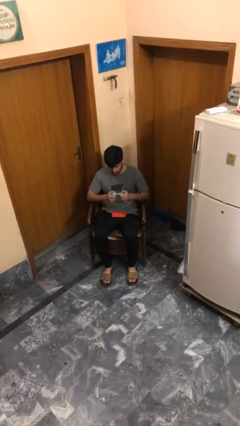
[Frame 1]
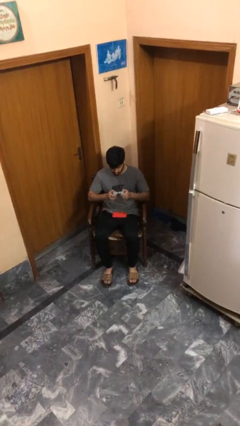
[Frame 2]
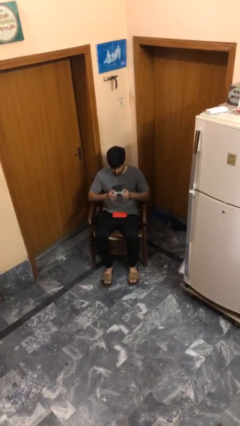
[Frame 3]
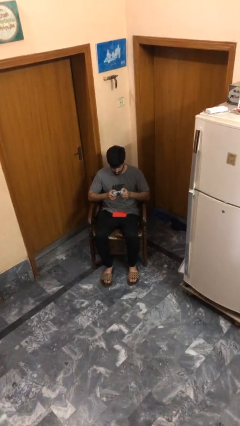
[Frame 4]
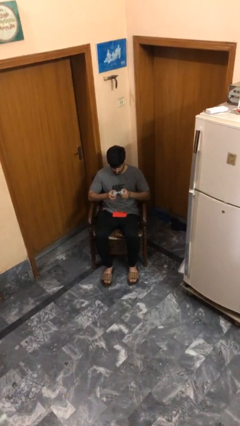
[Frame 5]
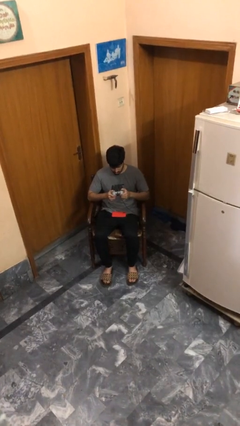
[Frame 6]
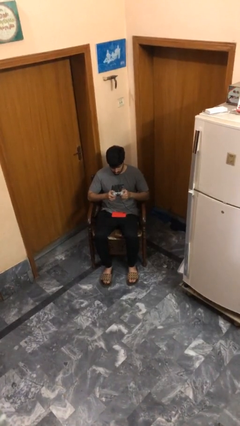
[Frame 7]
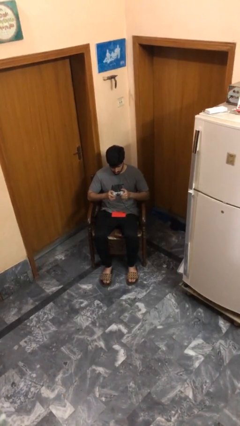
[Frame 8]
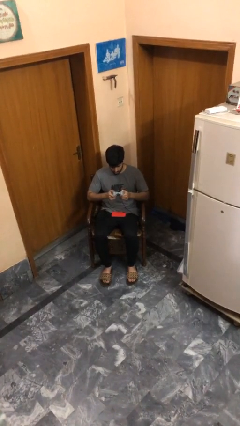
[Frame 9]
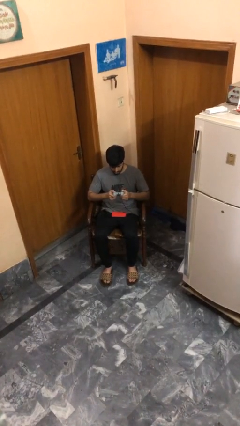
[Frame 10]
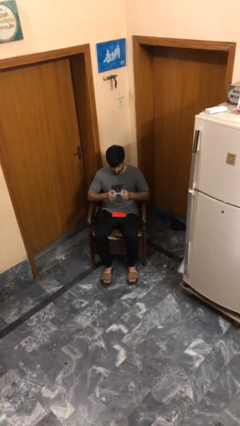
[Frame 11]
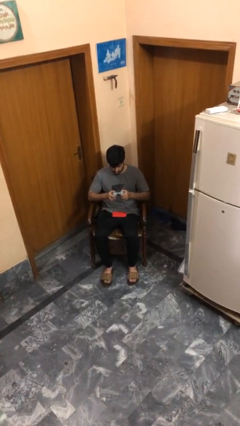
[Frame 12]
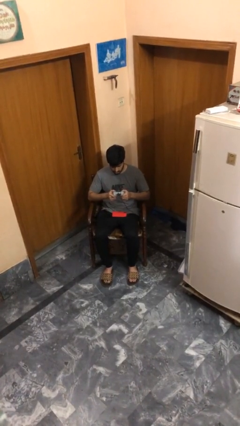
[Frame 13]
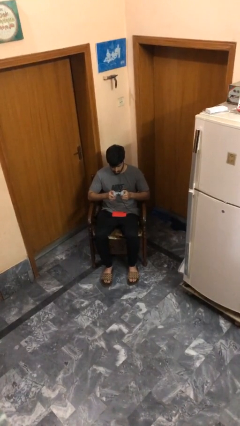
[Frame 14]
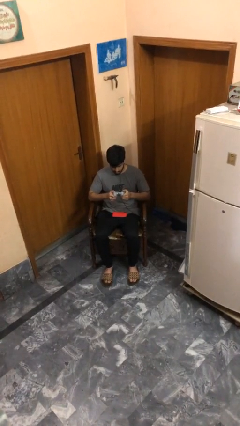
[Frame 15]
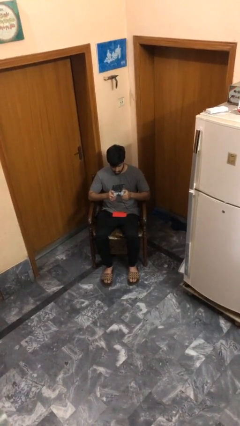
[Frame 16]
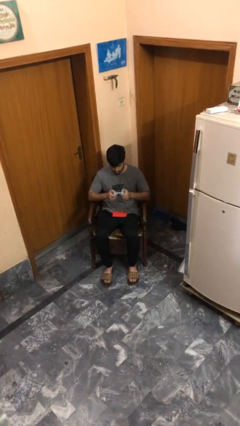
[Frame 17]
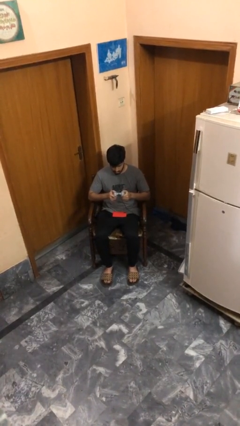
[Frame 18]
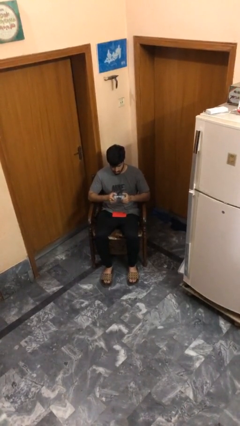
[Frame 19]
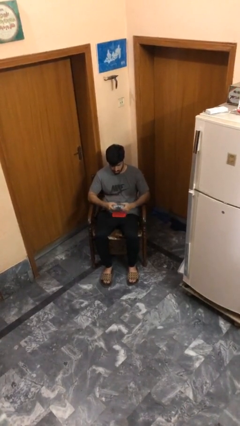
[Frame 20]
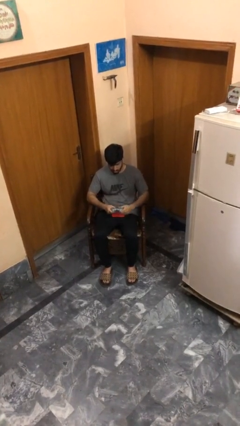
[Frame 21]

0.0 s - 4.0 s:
person interacts with handheld game

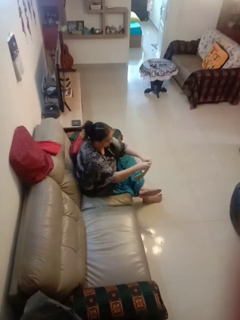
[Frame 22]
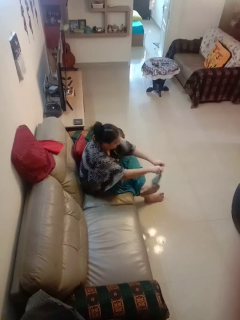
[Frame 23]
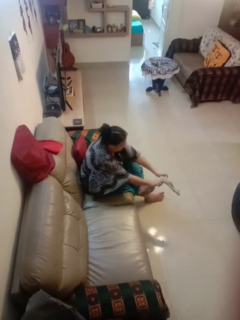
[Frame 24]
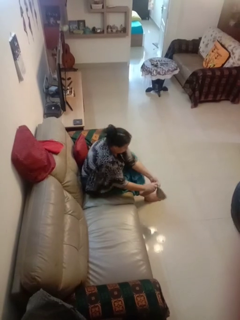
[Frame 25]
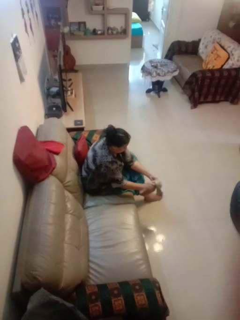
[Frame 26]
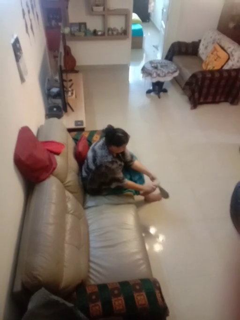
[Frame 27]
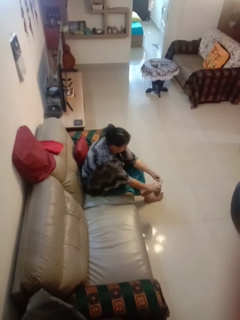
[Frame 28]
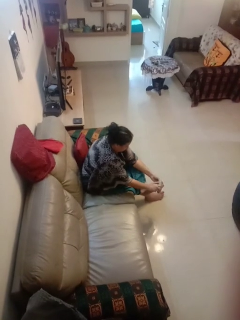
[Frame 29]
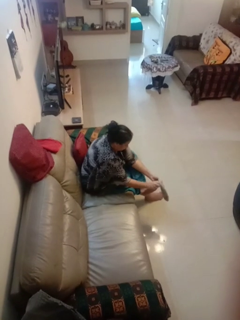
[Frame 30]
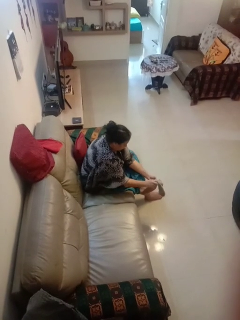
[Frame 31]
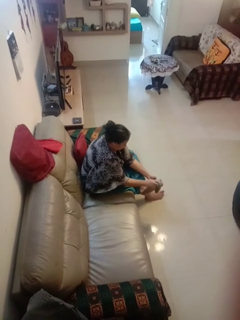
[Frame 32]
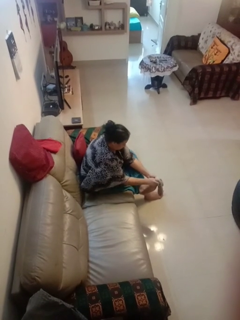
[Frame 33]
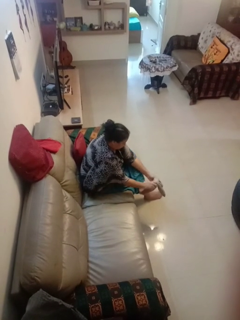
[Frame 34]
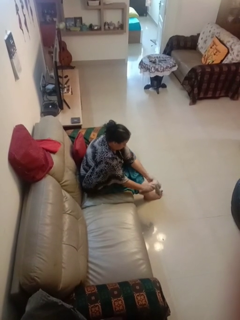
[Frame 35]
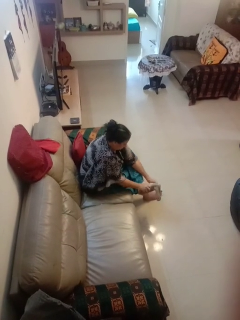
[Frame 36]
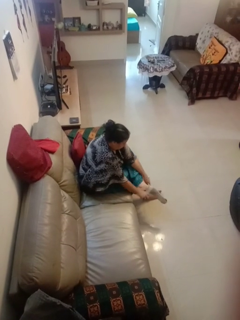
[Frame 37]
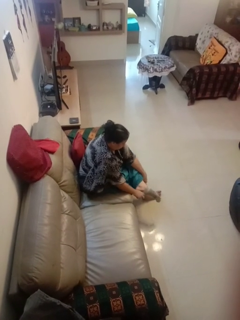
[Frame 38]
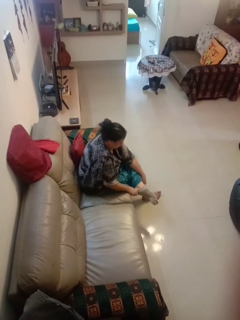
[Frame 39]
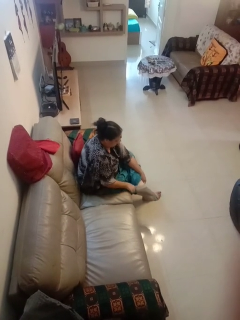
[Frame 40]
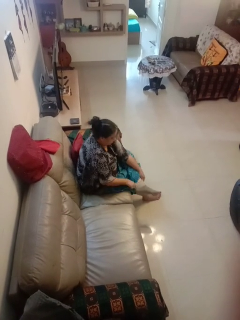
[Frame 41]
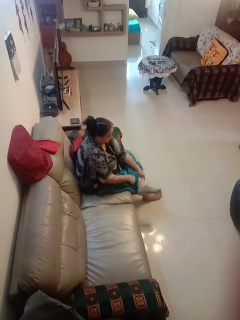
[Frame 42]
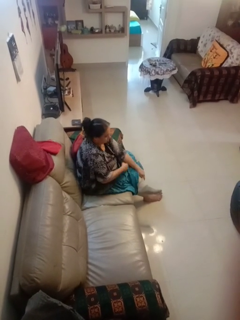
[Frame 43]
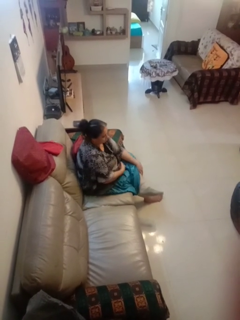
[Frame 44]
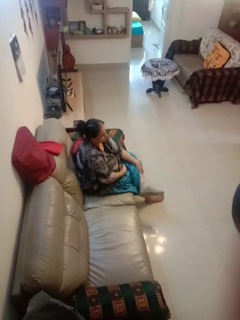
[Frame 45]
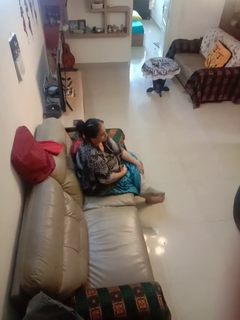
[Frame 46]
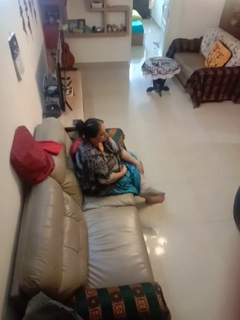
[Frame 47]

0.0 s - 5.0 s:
person puts on socks

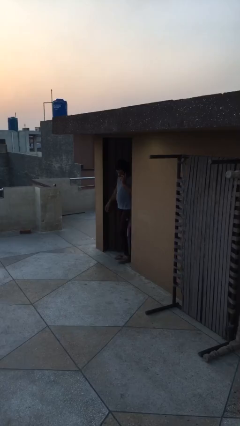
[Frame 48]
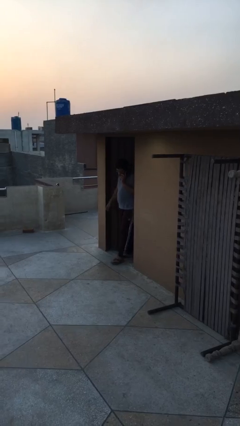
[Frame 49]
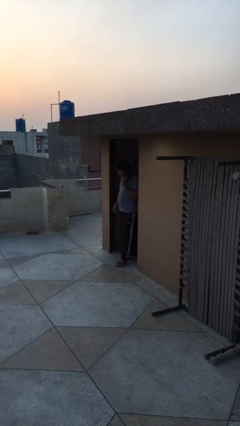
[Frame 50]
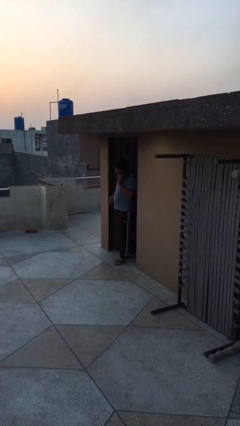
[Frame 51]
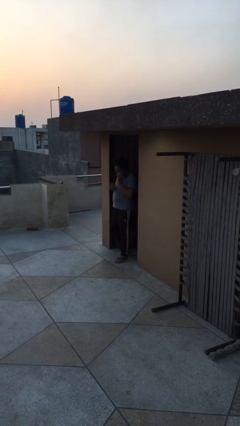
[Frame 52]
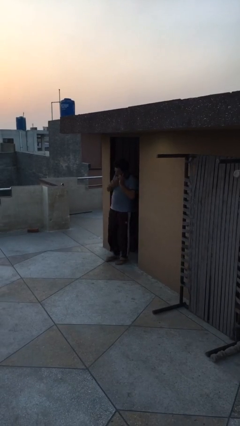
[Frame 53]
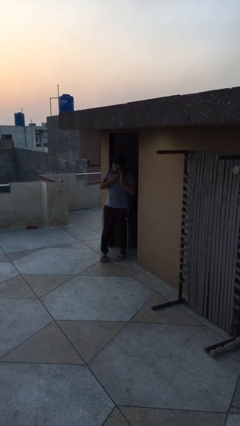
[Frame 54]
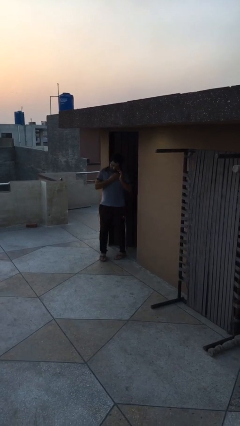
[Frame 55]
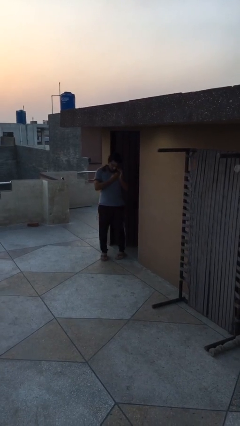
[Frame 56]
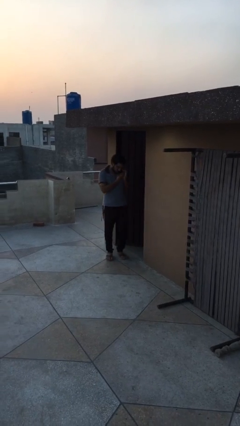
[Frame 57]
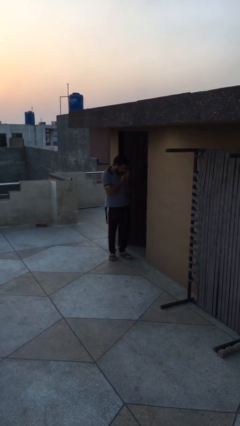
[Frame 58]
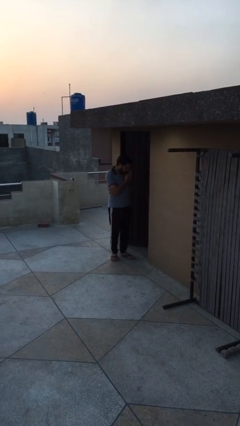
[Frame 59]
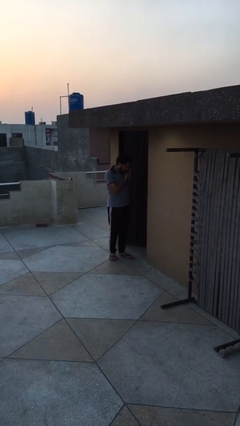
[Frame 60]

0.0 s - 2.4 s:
person enters scene through structure

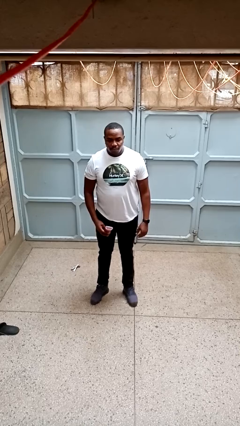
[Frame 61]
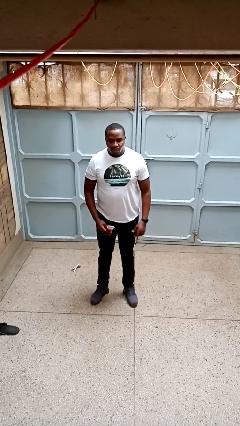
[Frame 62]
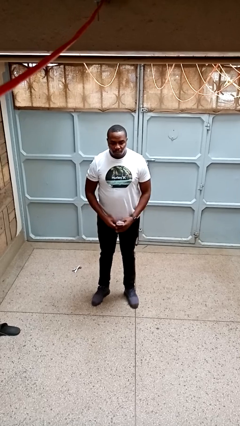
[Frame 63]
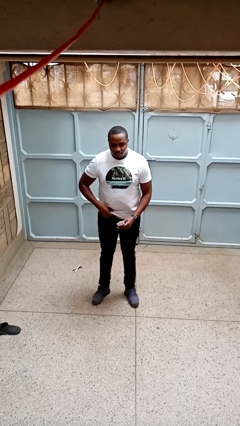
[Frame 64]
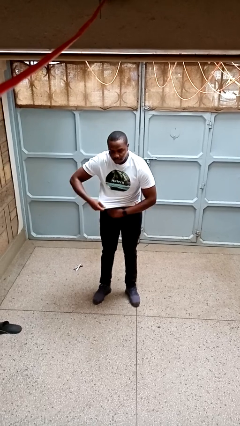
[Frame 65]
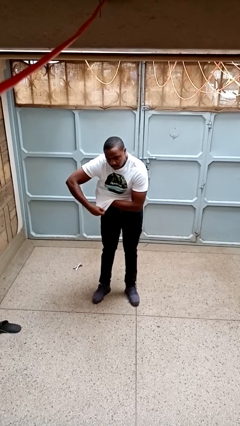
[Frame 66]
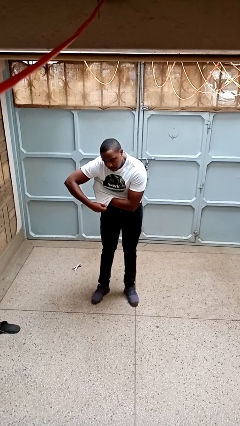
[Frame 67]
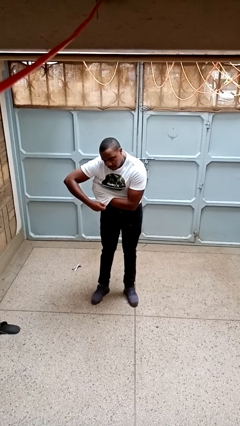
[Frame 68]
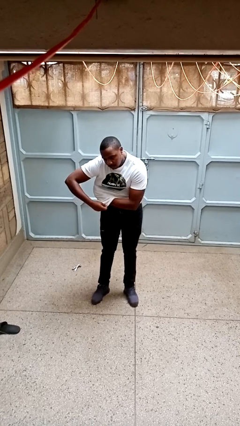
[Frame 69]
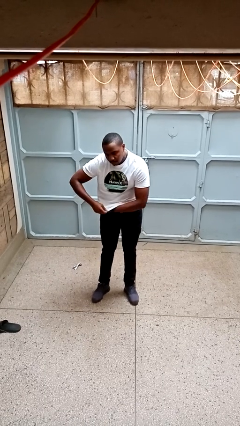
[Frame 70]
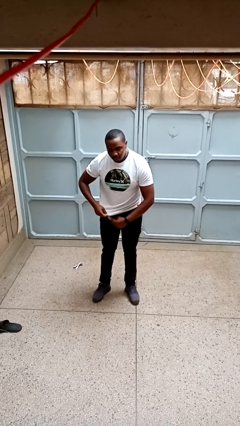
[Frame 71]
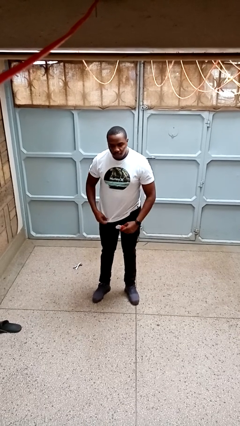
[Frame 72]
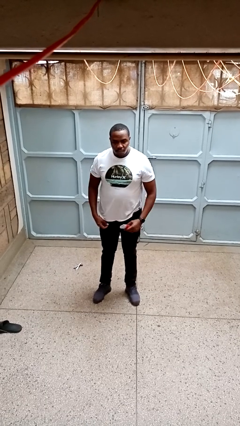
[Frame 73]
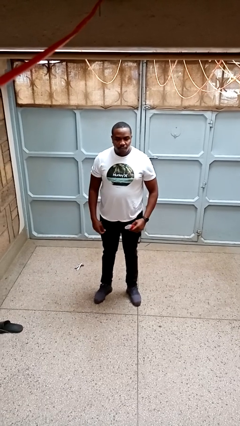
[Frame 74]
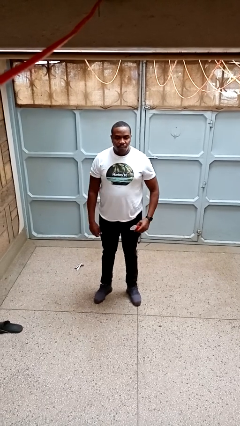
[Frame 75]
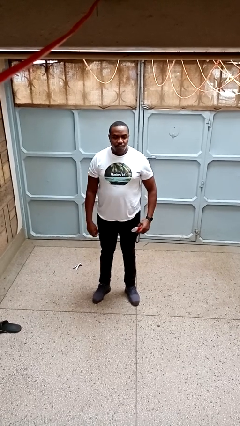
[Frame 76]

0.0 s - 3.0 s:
person applies deodorant

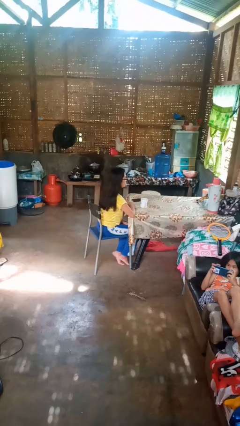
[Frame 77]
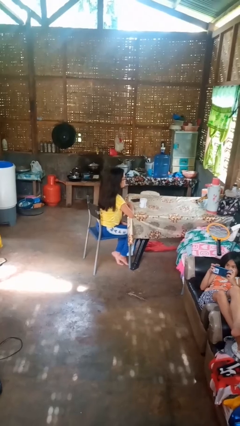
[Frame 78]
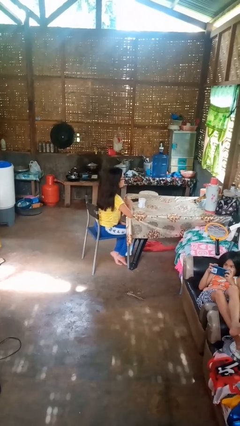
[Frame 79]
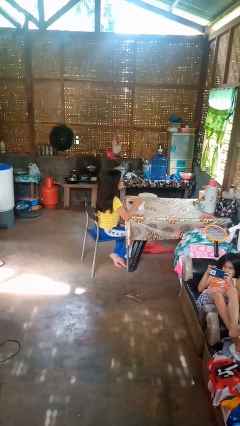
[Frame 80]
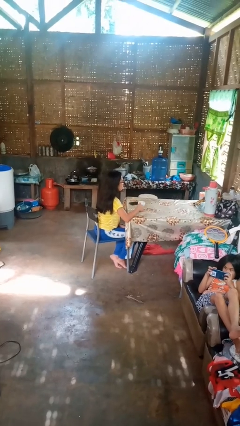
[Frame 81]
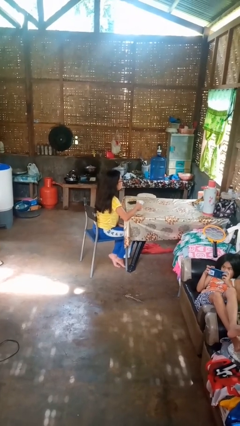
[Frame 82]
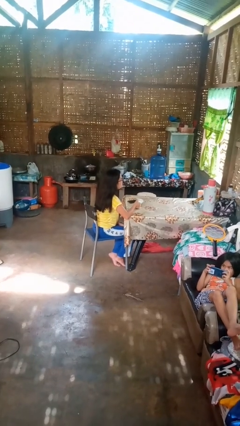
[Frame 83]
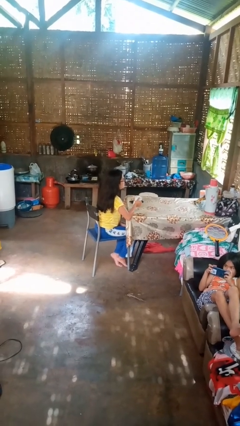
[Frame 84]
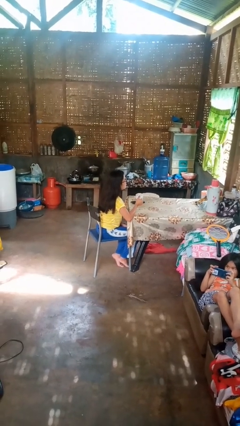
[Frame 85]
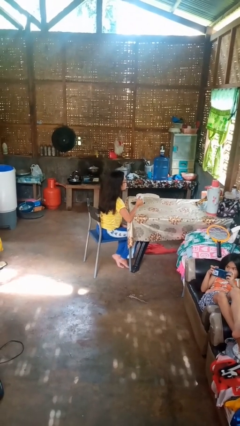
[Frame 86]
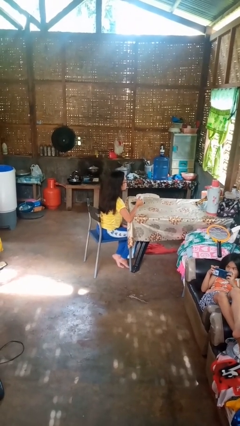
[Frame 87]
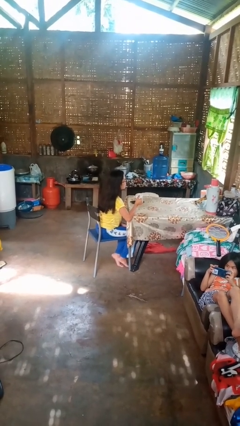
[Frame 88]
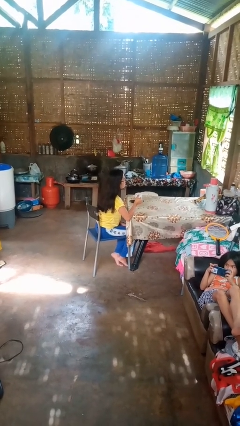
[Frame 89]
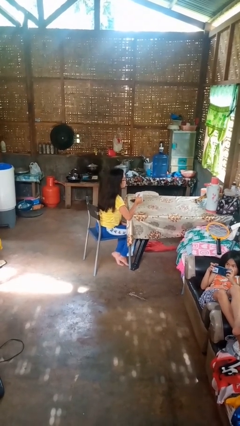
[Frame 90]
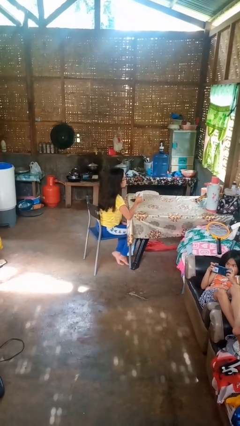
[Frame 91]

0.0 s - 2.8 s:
person picks up object from table

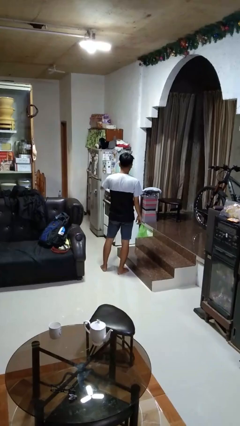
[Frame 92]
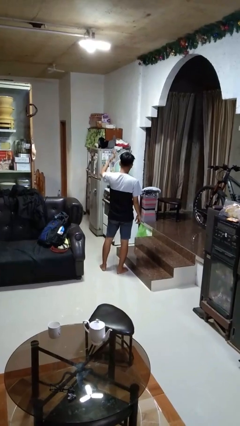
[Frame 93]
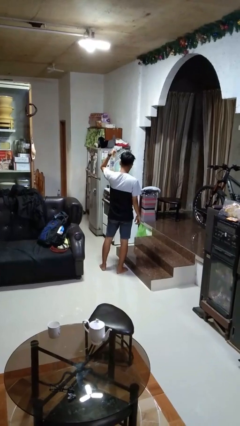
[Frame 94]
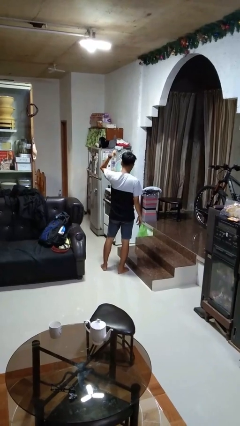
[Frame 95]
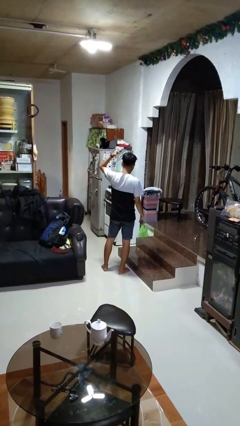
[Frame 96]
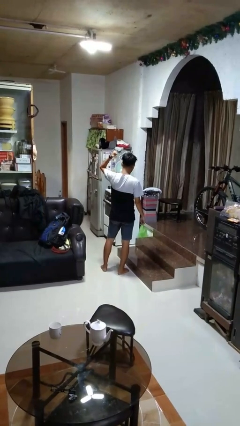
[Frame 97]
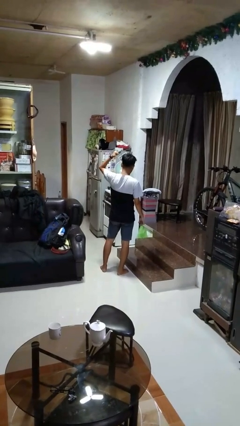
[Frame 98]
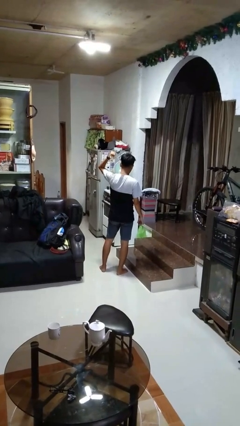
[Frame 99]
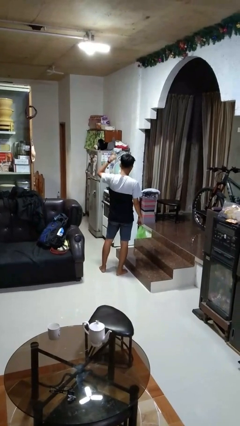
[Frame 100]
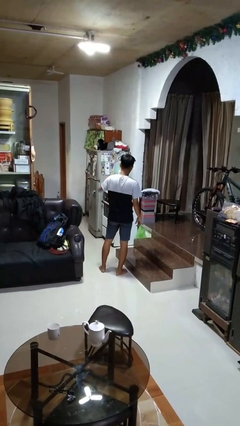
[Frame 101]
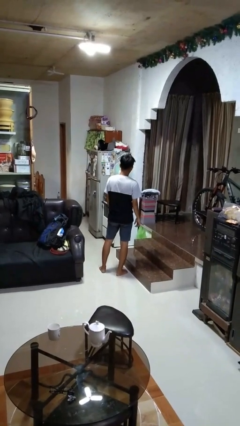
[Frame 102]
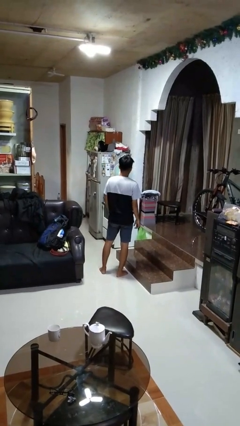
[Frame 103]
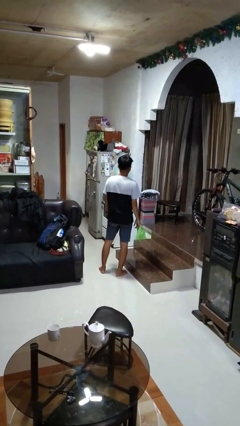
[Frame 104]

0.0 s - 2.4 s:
person gestures behind me
